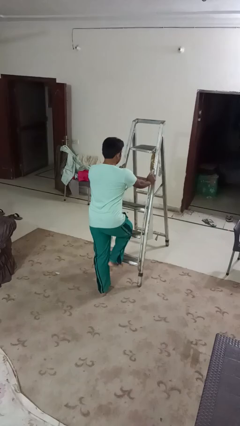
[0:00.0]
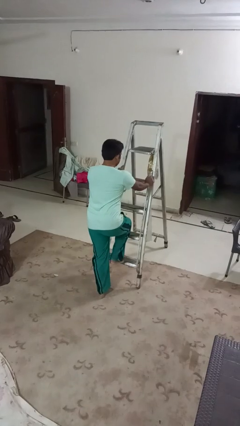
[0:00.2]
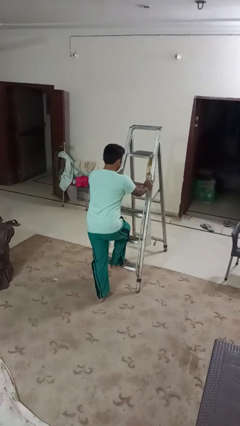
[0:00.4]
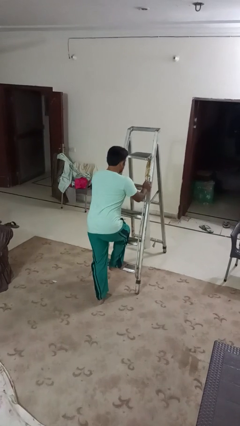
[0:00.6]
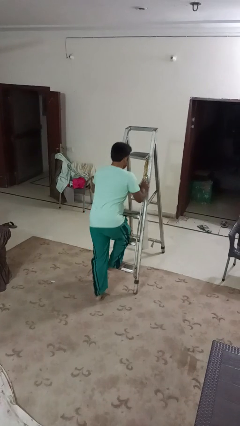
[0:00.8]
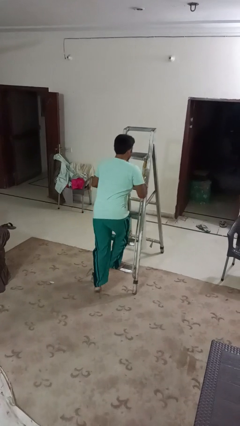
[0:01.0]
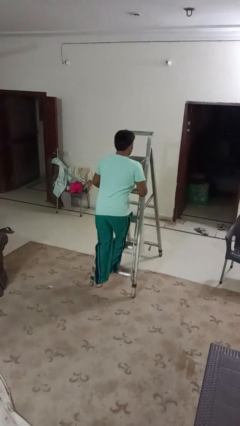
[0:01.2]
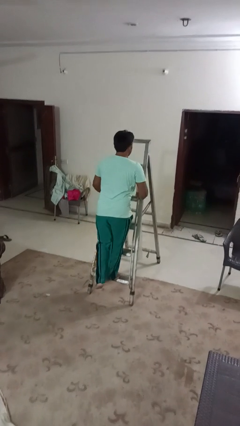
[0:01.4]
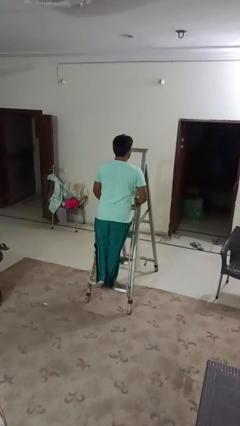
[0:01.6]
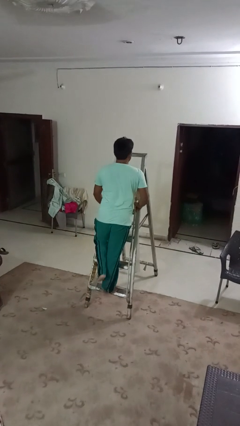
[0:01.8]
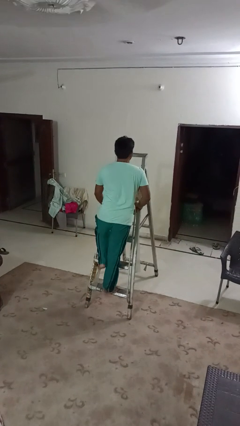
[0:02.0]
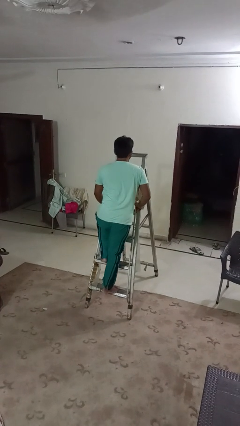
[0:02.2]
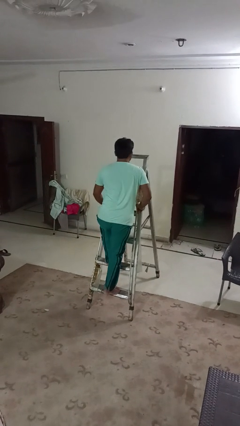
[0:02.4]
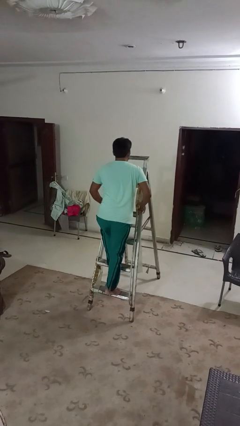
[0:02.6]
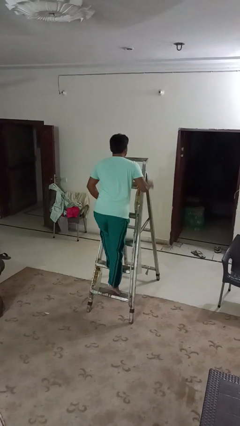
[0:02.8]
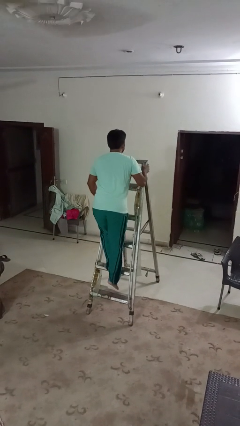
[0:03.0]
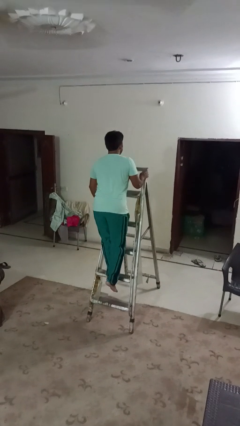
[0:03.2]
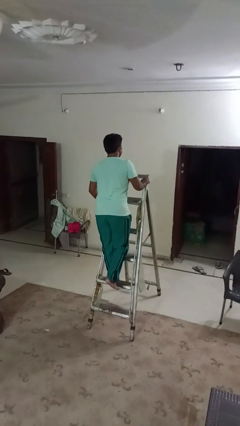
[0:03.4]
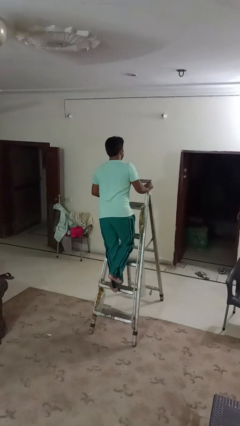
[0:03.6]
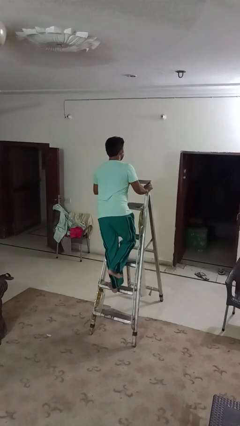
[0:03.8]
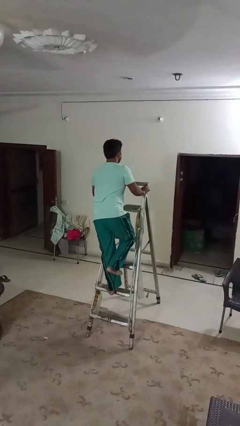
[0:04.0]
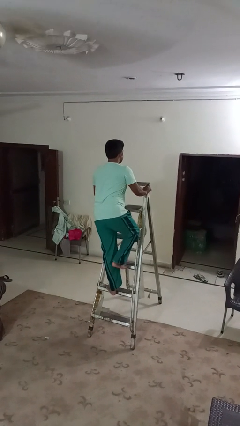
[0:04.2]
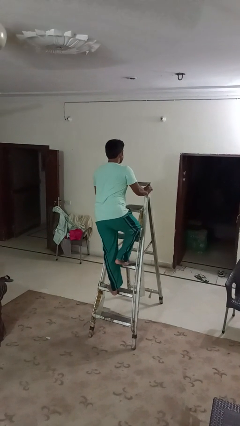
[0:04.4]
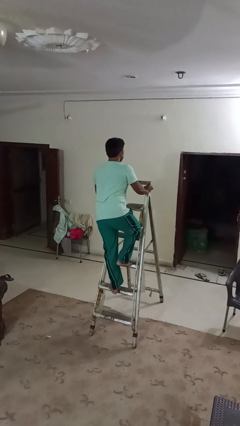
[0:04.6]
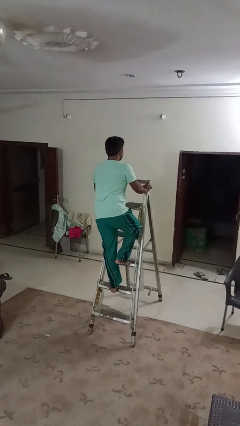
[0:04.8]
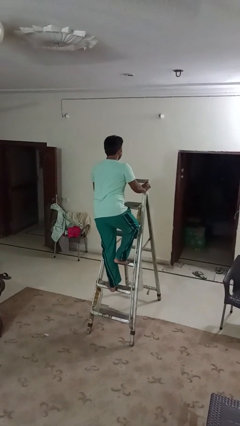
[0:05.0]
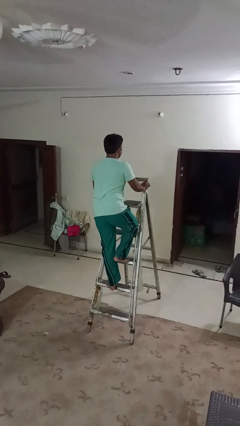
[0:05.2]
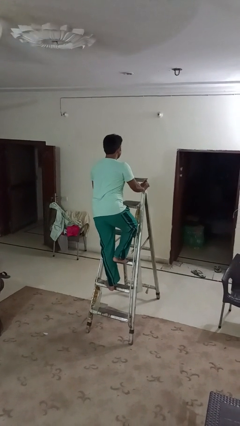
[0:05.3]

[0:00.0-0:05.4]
person climbs up ladder

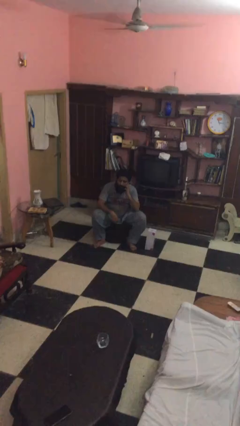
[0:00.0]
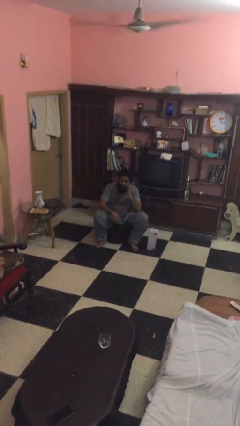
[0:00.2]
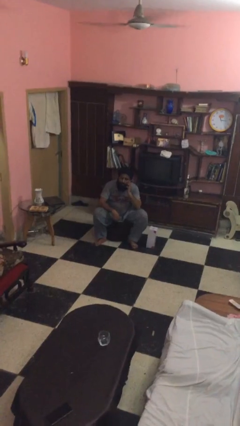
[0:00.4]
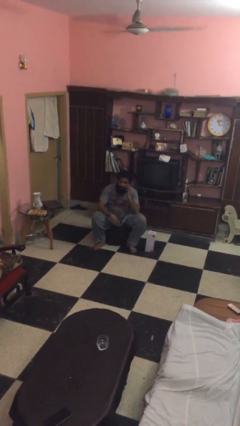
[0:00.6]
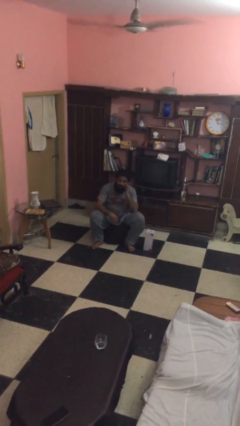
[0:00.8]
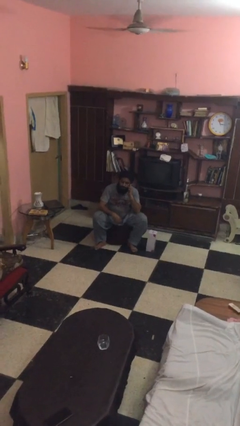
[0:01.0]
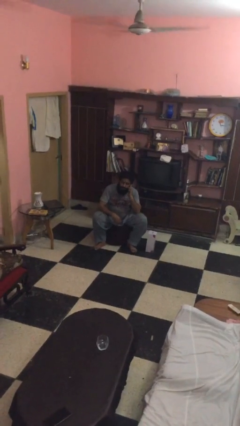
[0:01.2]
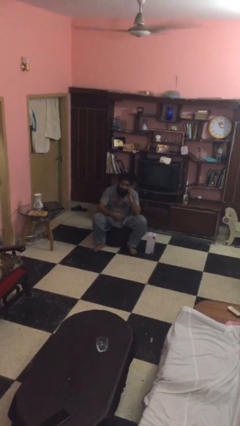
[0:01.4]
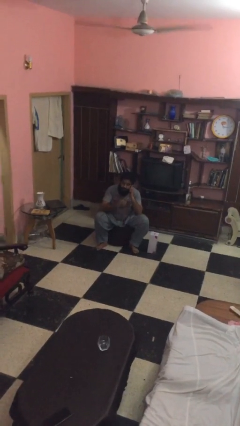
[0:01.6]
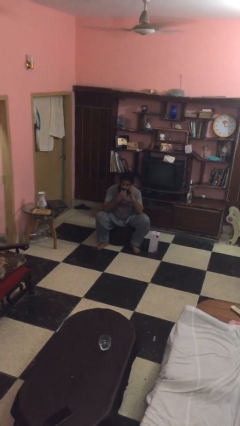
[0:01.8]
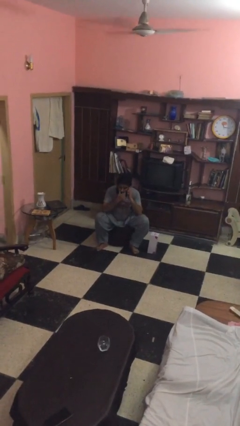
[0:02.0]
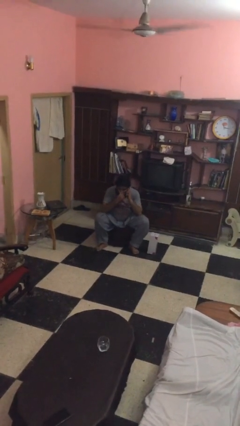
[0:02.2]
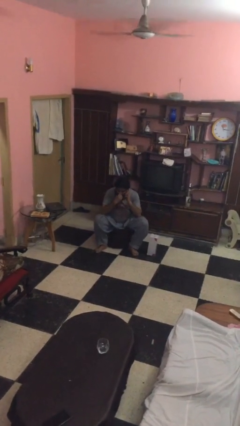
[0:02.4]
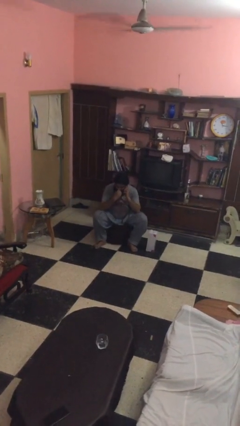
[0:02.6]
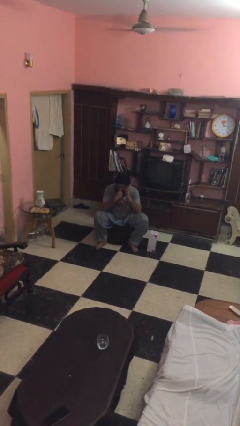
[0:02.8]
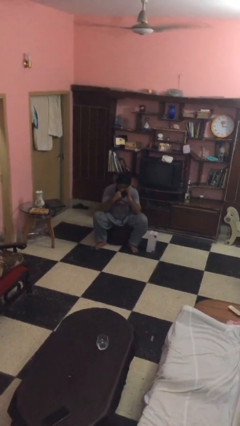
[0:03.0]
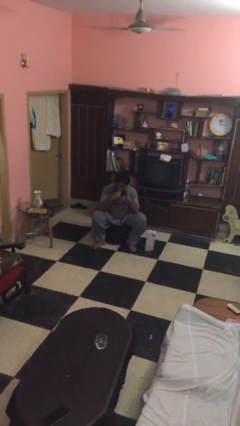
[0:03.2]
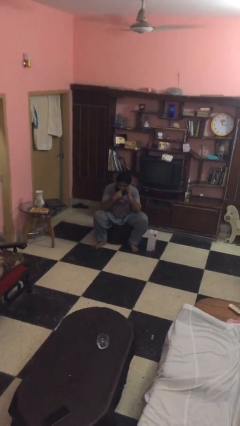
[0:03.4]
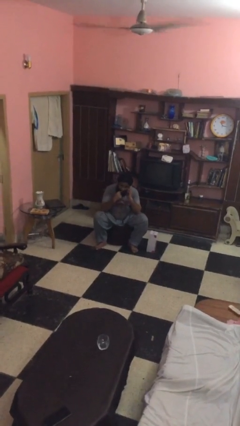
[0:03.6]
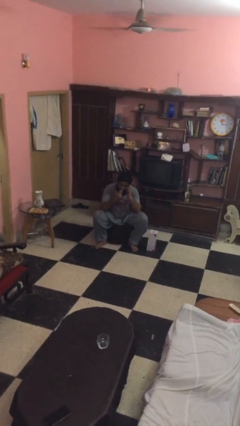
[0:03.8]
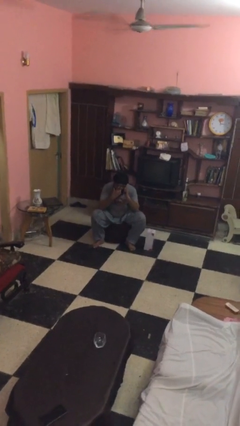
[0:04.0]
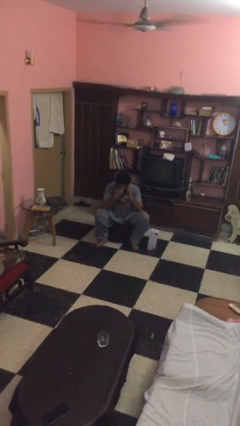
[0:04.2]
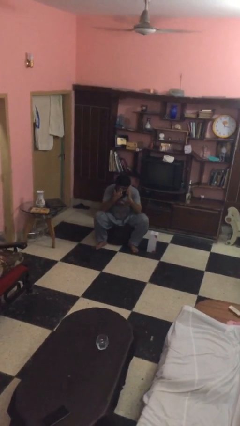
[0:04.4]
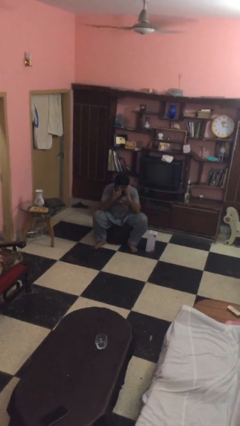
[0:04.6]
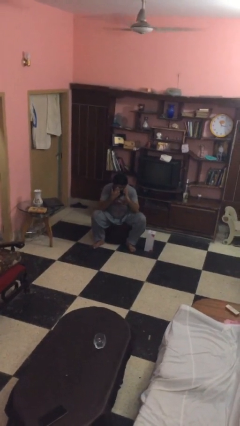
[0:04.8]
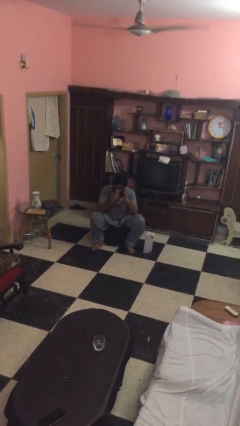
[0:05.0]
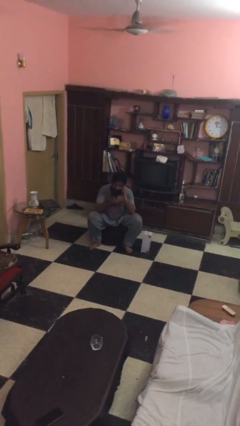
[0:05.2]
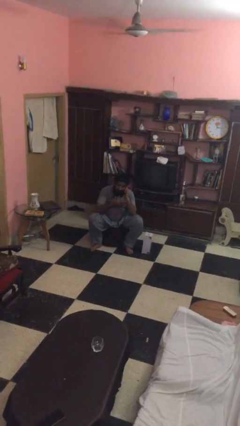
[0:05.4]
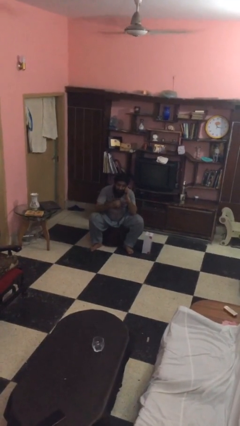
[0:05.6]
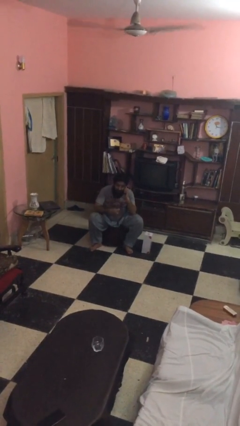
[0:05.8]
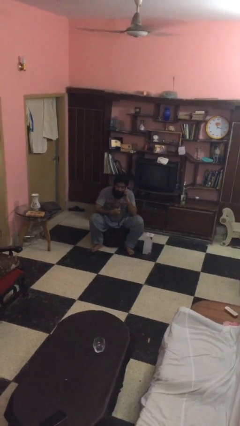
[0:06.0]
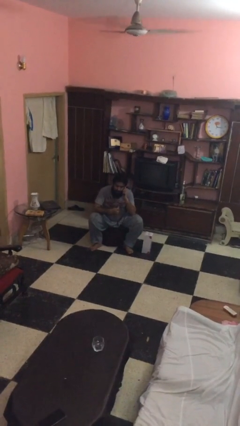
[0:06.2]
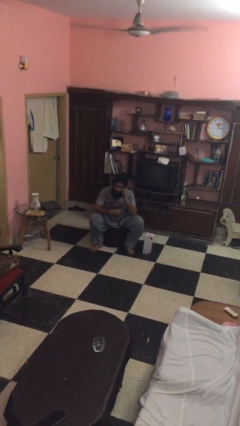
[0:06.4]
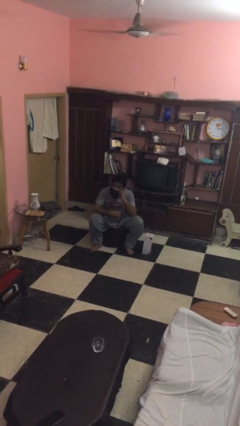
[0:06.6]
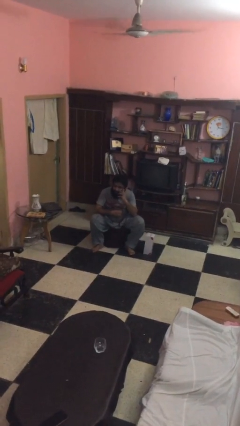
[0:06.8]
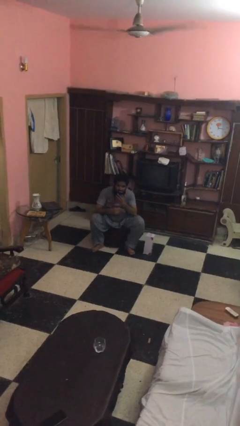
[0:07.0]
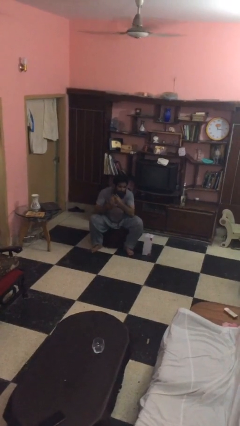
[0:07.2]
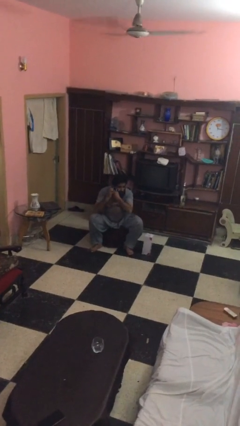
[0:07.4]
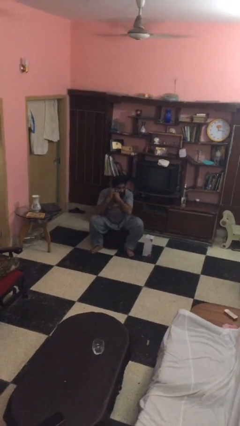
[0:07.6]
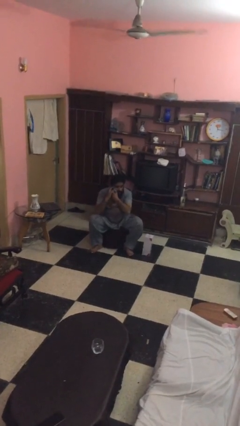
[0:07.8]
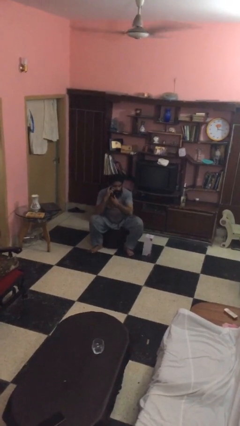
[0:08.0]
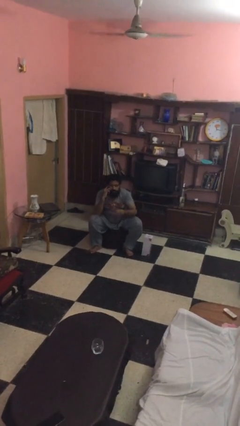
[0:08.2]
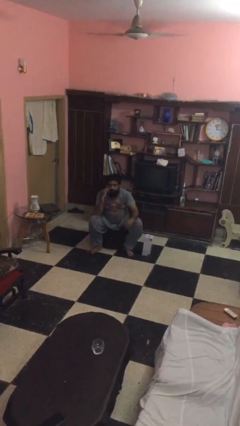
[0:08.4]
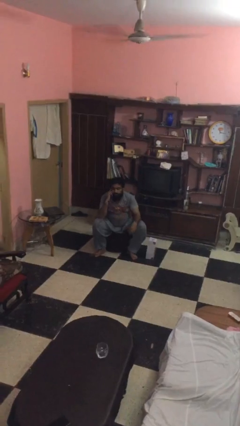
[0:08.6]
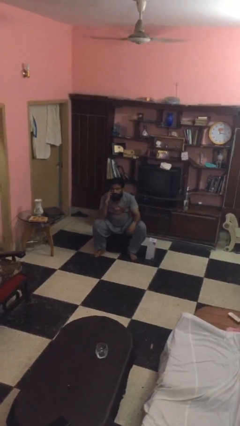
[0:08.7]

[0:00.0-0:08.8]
person talks on phone

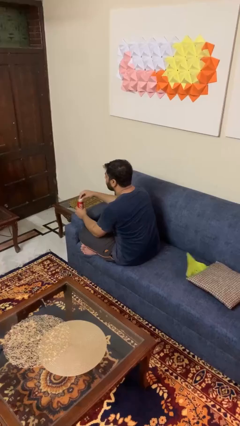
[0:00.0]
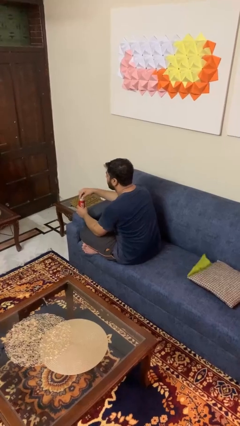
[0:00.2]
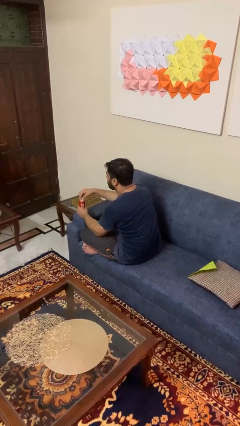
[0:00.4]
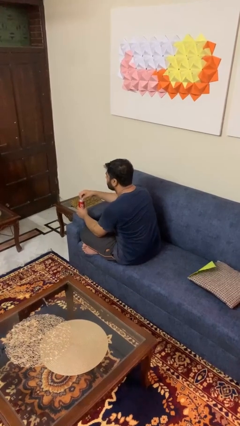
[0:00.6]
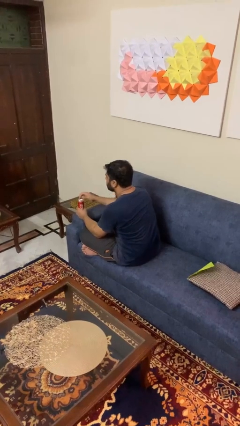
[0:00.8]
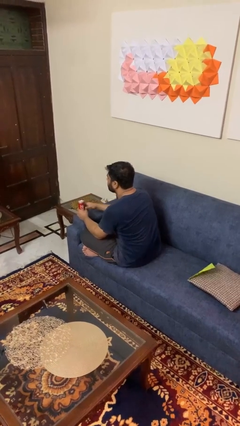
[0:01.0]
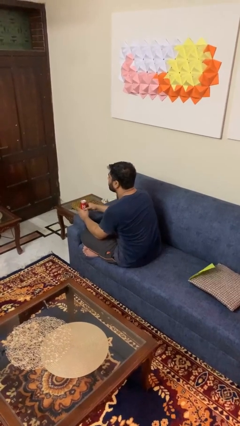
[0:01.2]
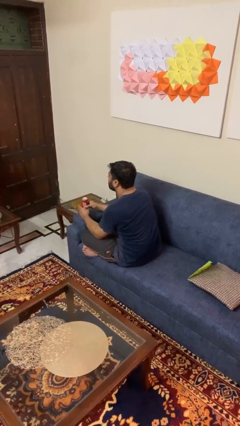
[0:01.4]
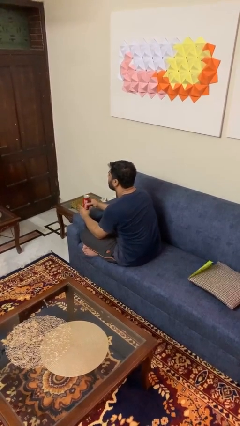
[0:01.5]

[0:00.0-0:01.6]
person opens beverage can

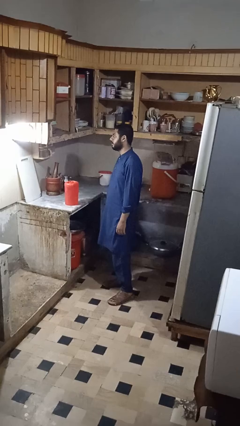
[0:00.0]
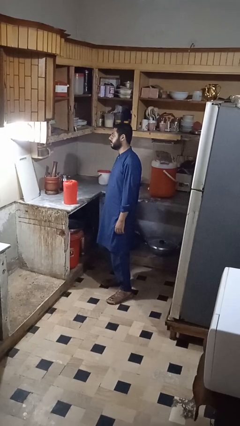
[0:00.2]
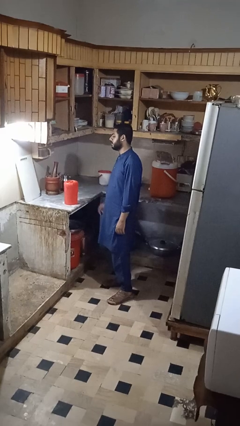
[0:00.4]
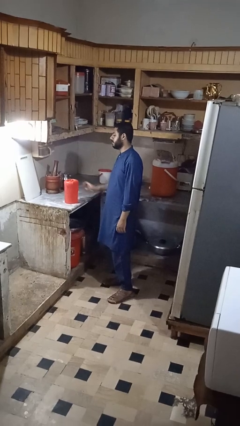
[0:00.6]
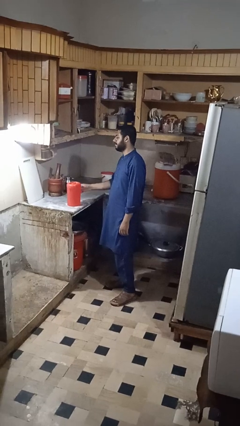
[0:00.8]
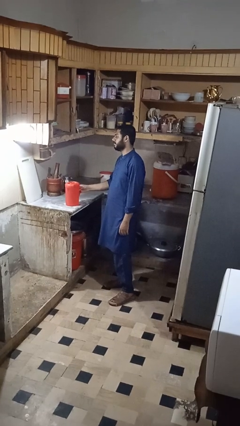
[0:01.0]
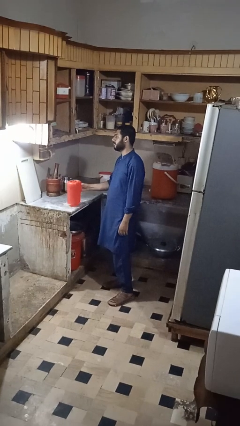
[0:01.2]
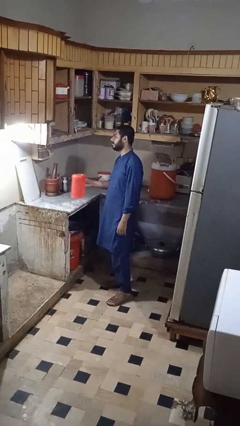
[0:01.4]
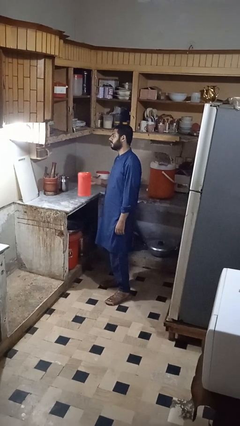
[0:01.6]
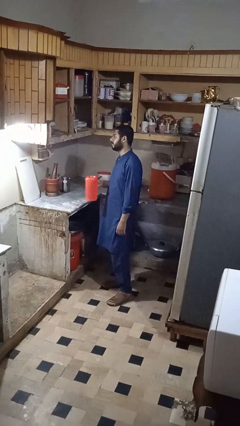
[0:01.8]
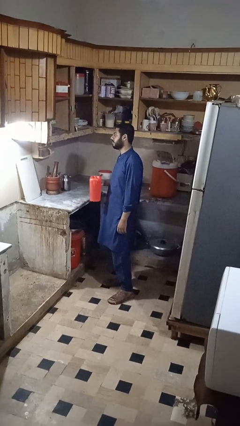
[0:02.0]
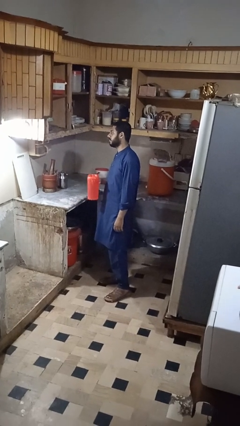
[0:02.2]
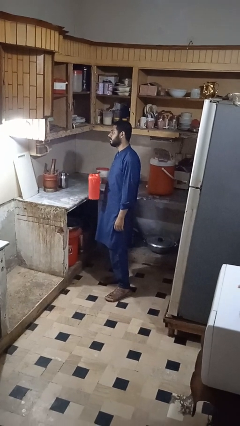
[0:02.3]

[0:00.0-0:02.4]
person picks up object from countertop
